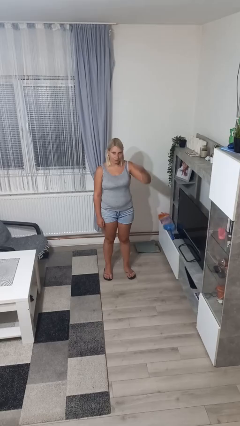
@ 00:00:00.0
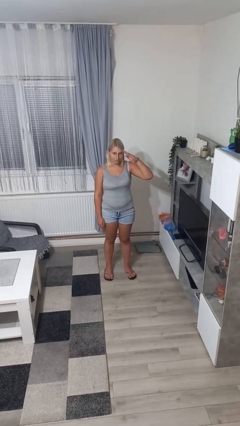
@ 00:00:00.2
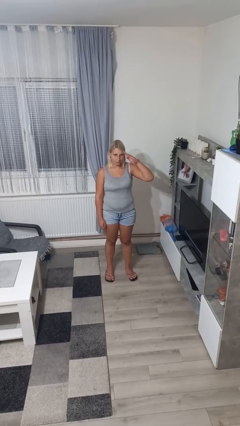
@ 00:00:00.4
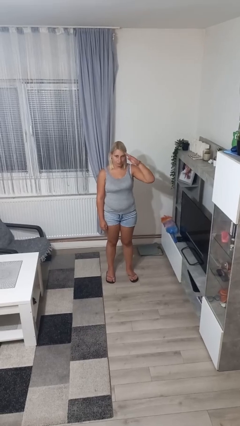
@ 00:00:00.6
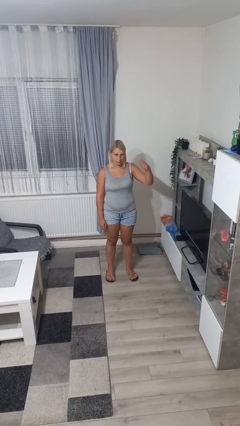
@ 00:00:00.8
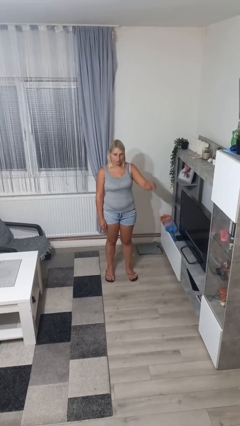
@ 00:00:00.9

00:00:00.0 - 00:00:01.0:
person salutes

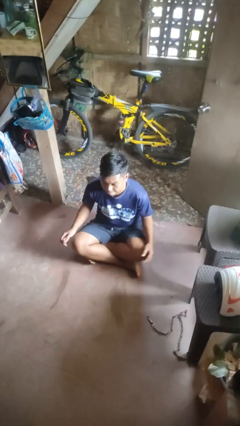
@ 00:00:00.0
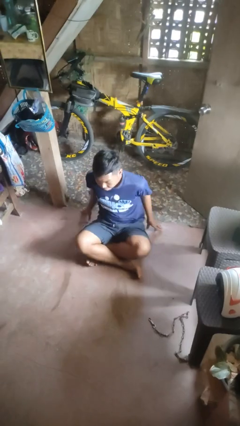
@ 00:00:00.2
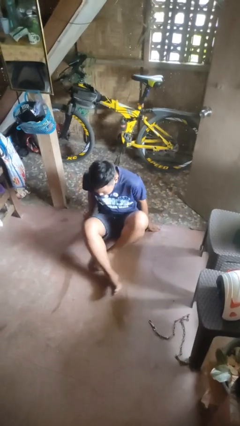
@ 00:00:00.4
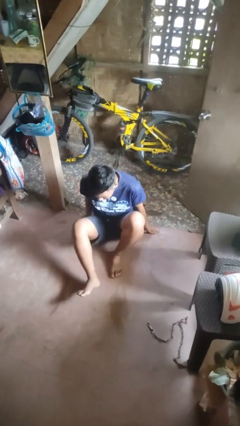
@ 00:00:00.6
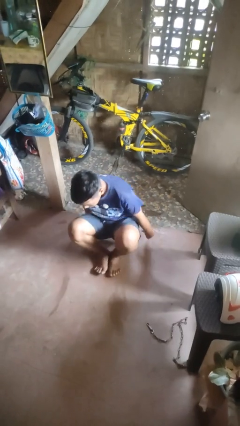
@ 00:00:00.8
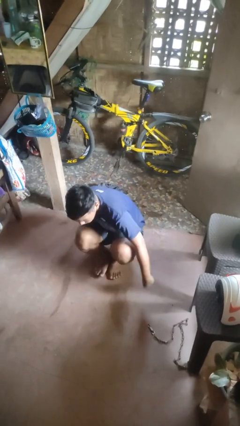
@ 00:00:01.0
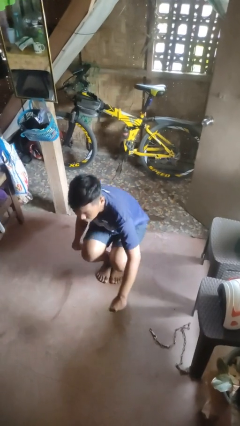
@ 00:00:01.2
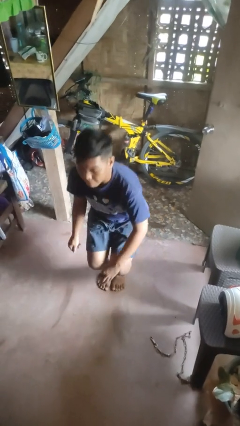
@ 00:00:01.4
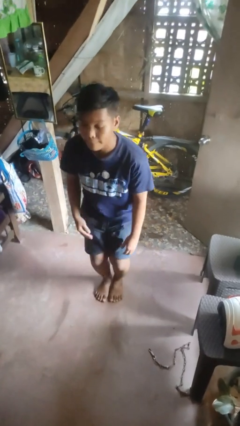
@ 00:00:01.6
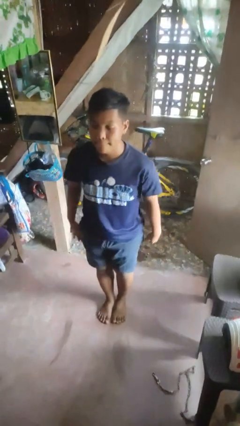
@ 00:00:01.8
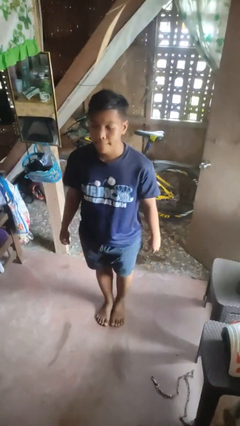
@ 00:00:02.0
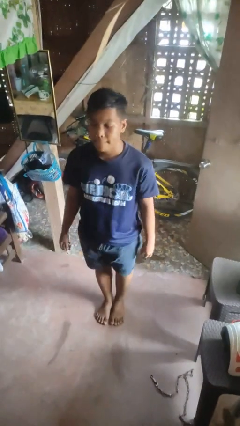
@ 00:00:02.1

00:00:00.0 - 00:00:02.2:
person stands up from floor

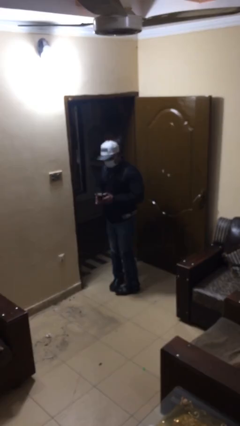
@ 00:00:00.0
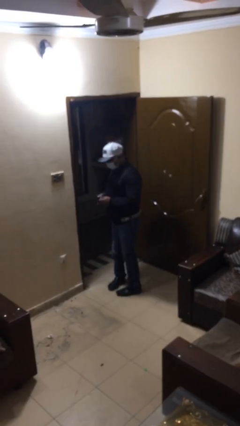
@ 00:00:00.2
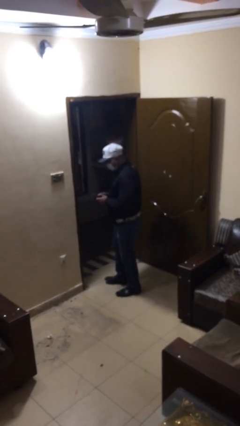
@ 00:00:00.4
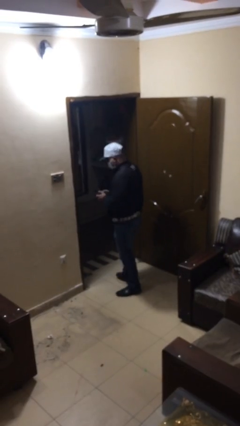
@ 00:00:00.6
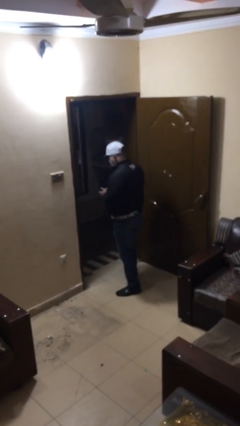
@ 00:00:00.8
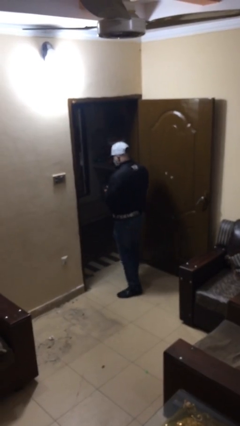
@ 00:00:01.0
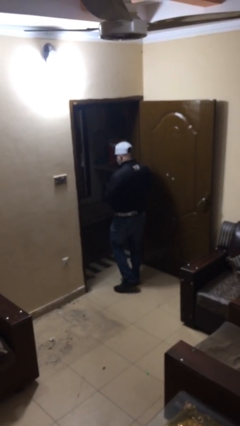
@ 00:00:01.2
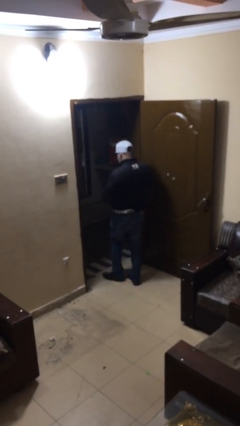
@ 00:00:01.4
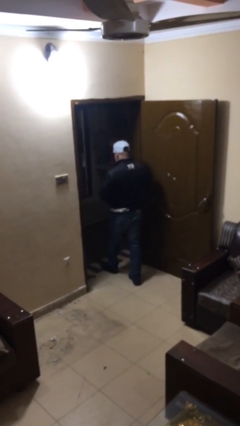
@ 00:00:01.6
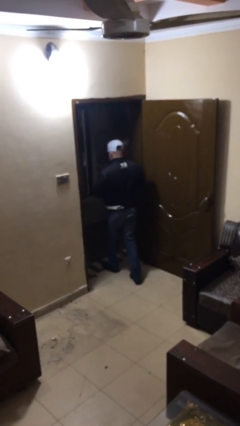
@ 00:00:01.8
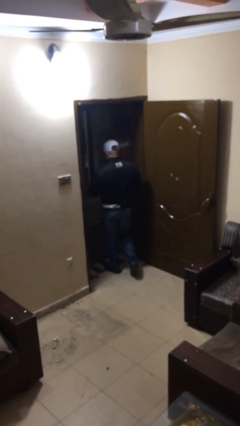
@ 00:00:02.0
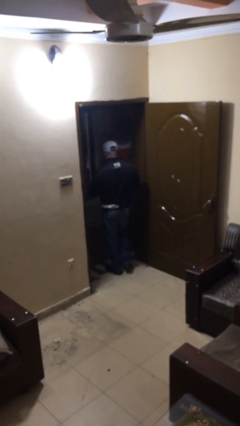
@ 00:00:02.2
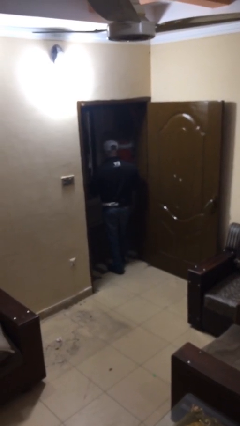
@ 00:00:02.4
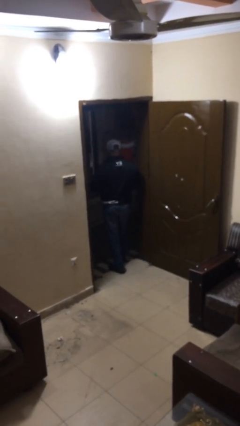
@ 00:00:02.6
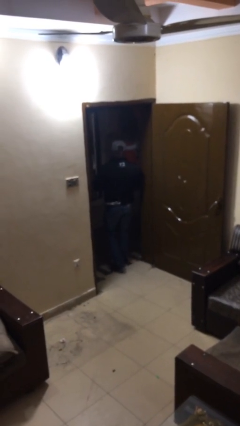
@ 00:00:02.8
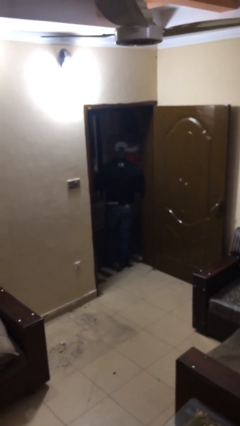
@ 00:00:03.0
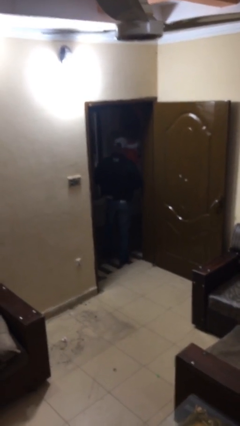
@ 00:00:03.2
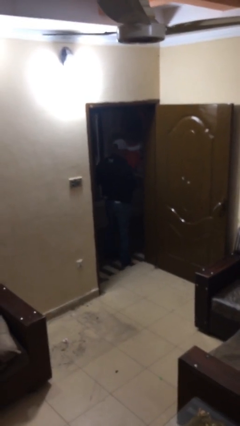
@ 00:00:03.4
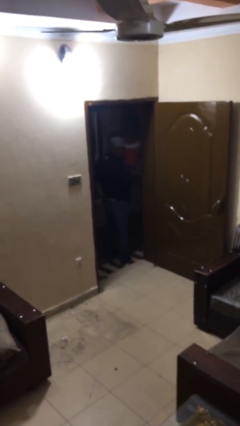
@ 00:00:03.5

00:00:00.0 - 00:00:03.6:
person exits scene through structure

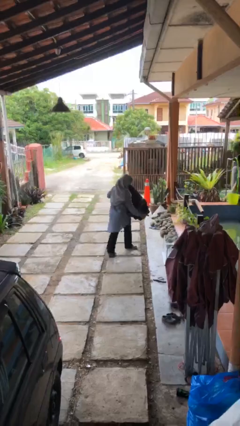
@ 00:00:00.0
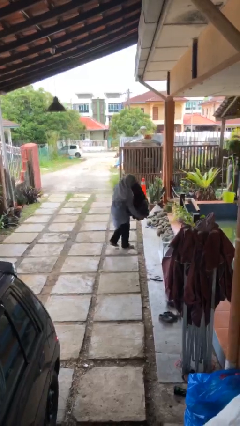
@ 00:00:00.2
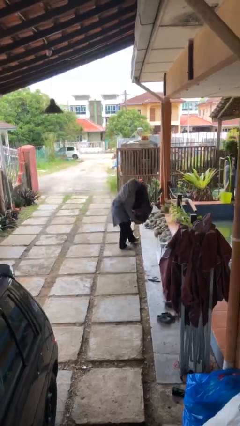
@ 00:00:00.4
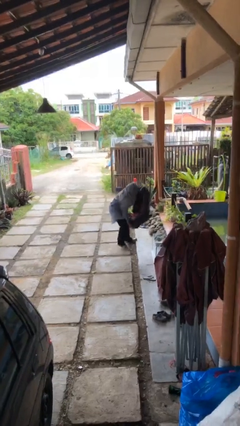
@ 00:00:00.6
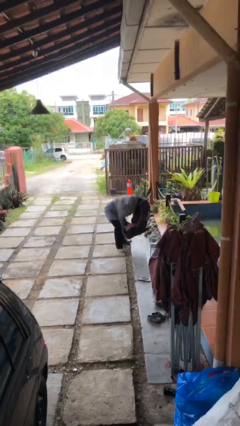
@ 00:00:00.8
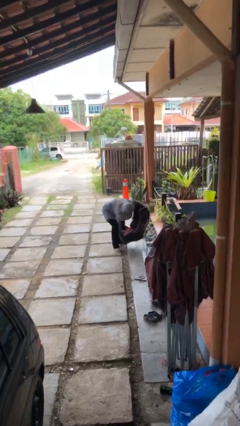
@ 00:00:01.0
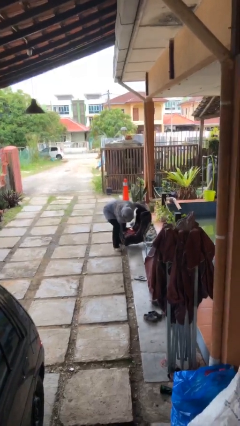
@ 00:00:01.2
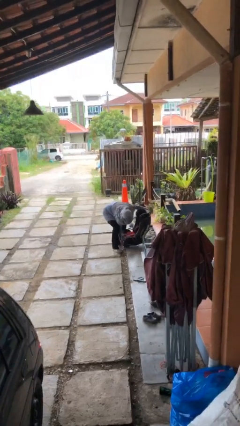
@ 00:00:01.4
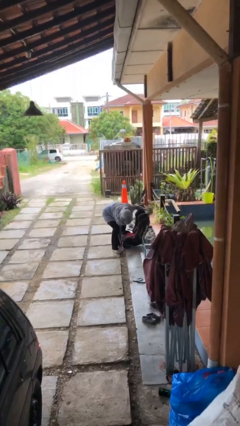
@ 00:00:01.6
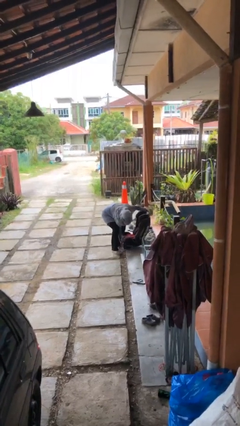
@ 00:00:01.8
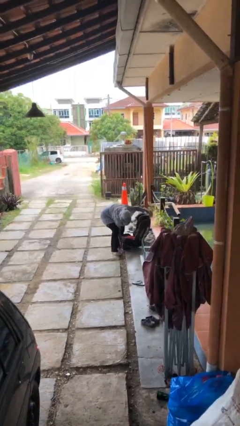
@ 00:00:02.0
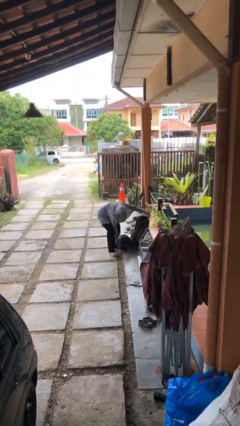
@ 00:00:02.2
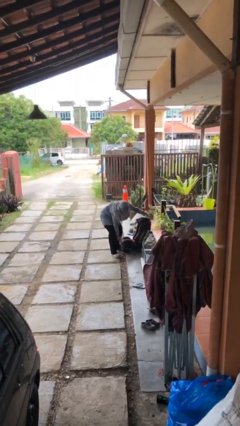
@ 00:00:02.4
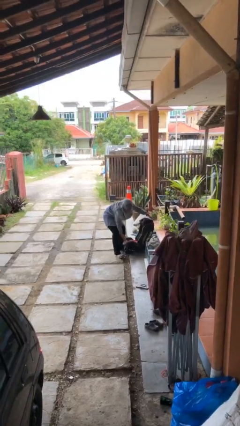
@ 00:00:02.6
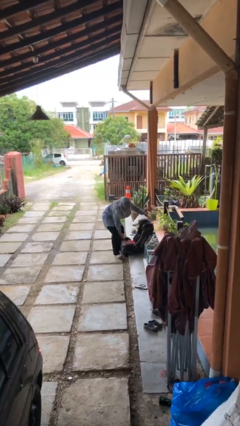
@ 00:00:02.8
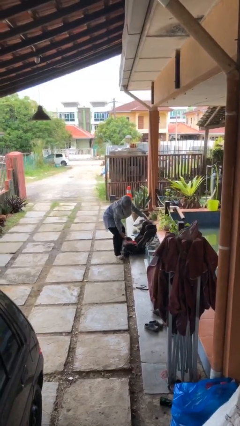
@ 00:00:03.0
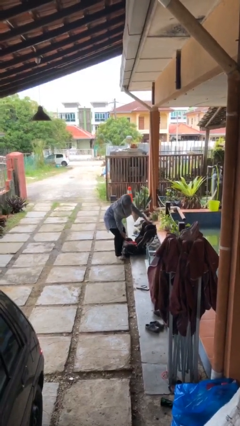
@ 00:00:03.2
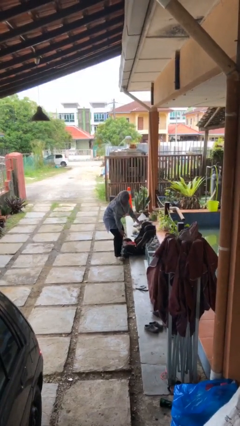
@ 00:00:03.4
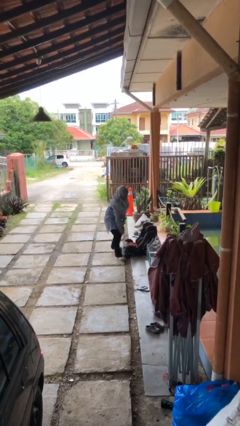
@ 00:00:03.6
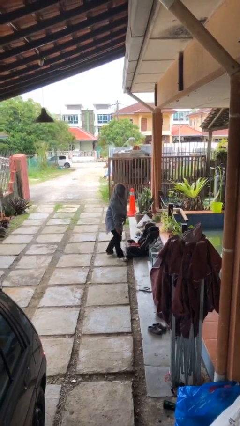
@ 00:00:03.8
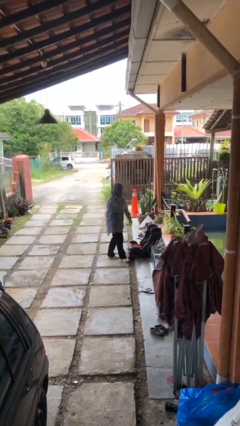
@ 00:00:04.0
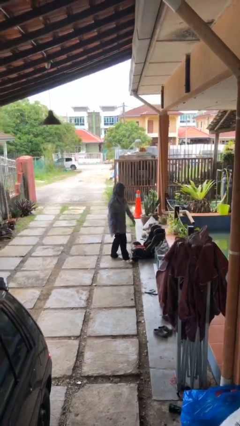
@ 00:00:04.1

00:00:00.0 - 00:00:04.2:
person puts down object on floor

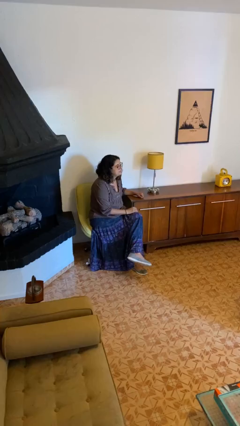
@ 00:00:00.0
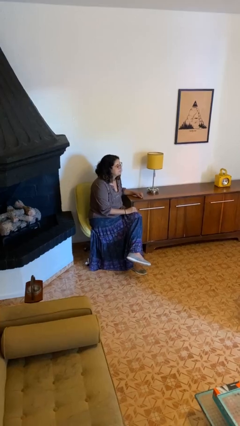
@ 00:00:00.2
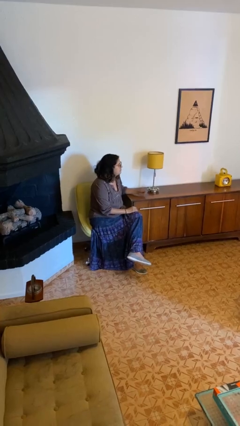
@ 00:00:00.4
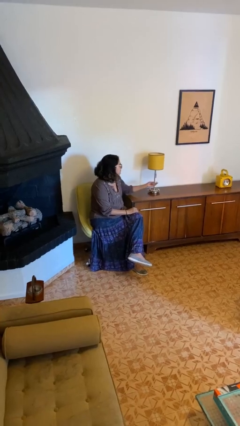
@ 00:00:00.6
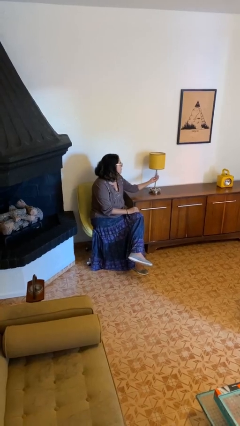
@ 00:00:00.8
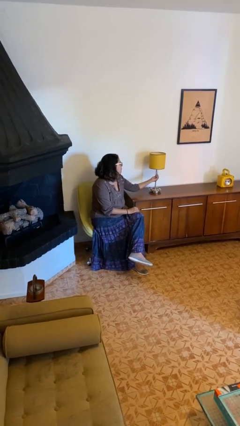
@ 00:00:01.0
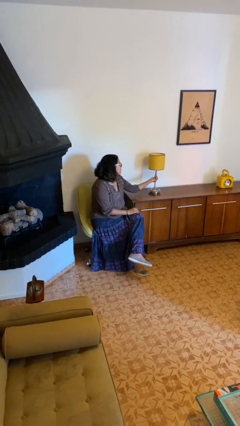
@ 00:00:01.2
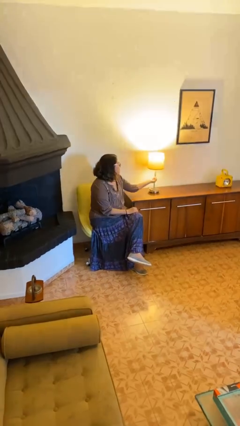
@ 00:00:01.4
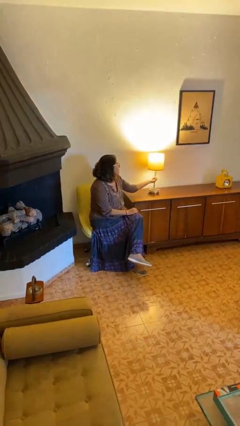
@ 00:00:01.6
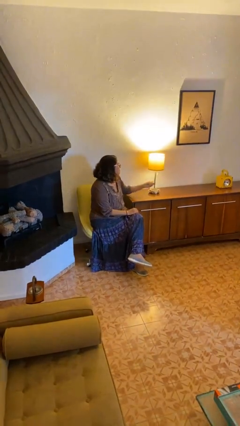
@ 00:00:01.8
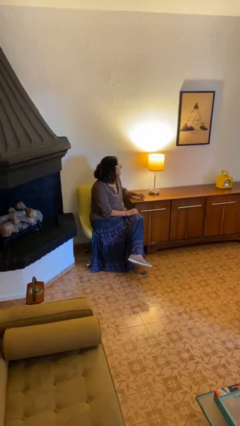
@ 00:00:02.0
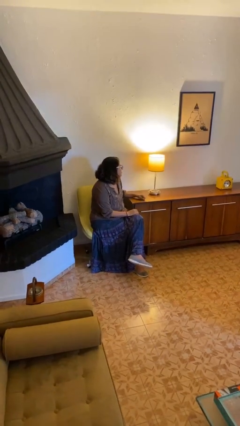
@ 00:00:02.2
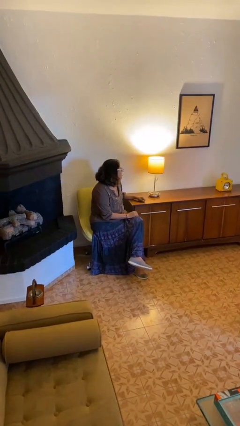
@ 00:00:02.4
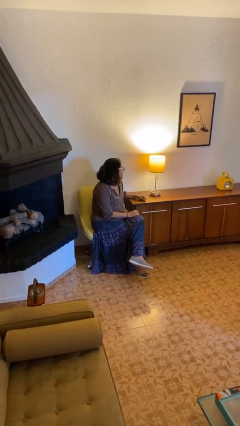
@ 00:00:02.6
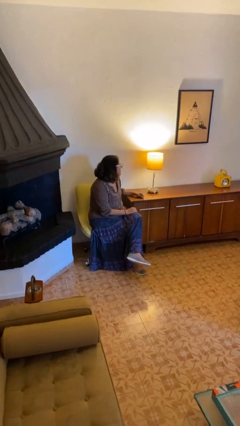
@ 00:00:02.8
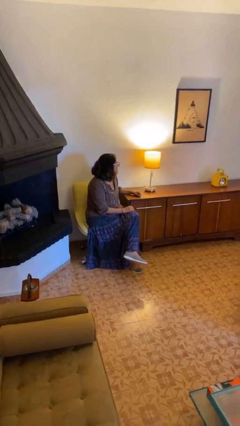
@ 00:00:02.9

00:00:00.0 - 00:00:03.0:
person turns on lamp

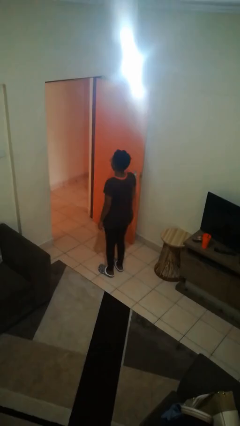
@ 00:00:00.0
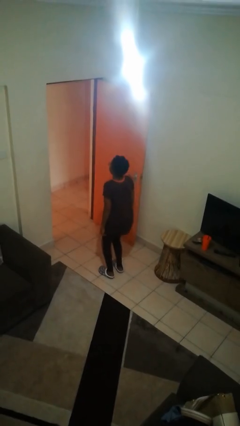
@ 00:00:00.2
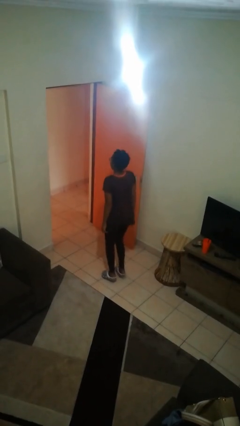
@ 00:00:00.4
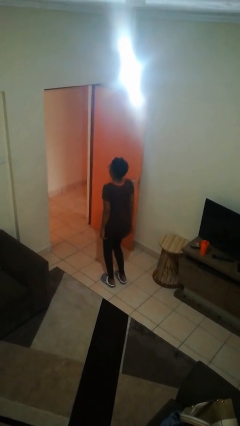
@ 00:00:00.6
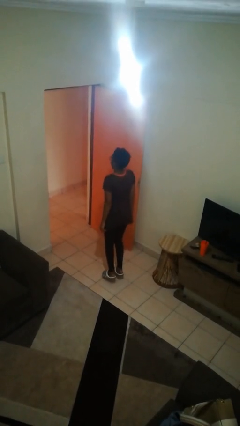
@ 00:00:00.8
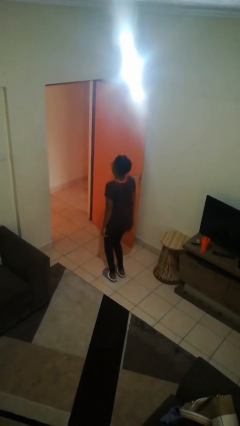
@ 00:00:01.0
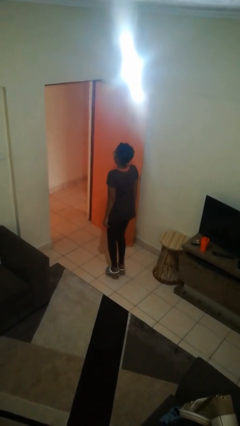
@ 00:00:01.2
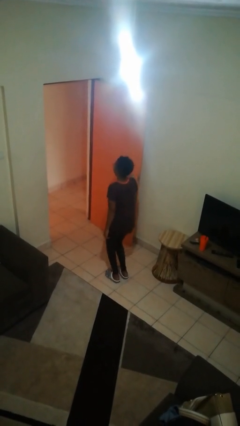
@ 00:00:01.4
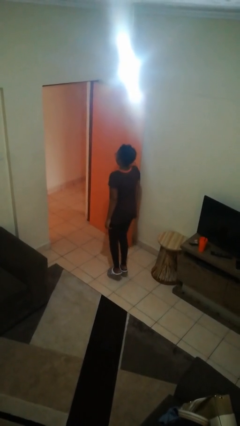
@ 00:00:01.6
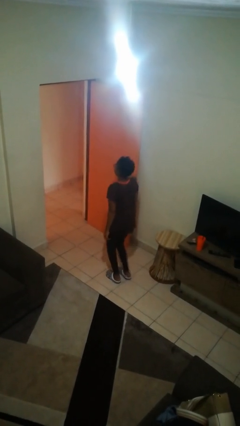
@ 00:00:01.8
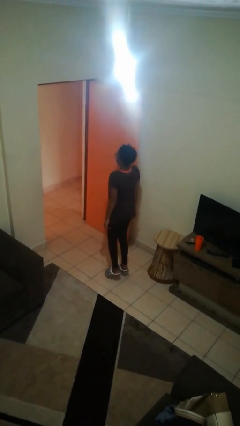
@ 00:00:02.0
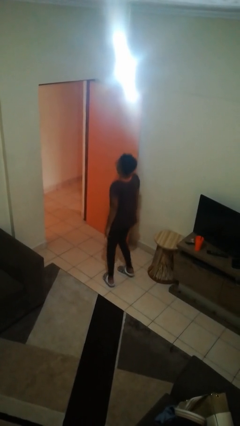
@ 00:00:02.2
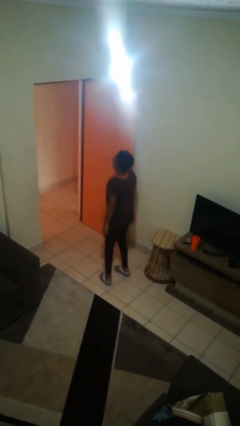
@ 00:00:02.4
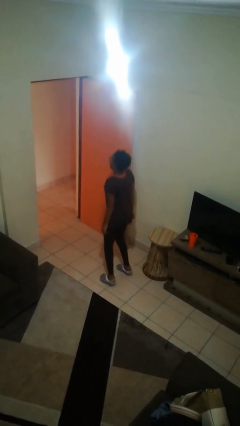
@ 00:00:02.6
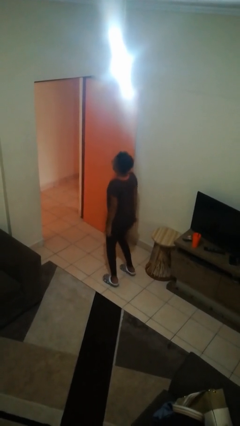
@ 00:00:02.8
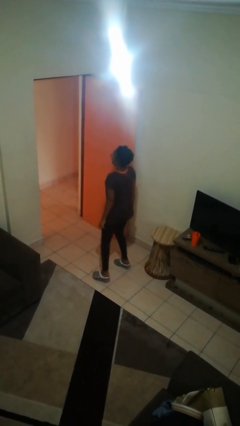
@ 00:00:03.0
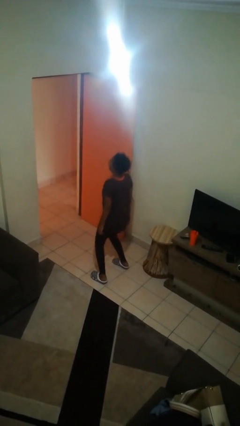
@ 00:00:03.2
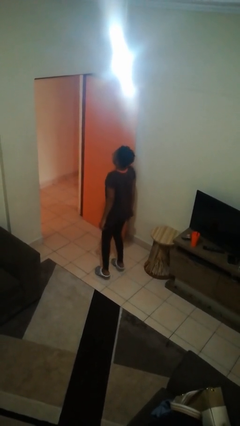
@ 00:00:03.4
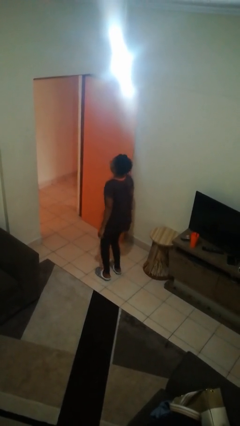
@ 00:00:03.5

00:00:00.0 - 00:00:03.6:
person jumps
